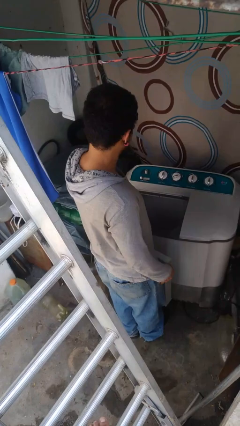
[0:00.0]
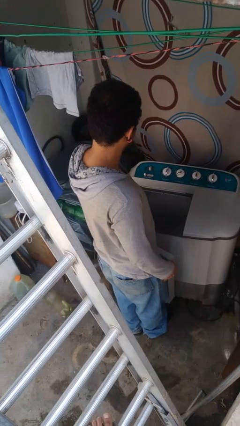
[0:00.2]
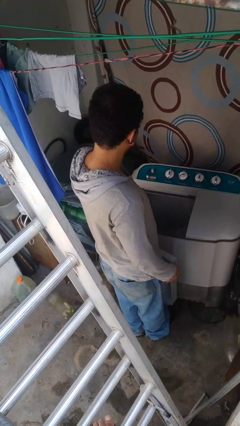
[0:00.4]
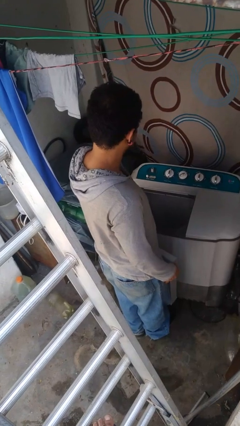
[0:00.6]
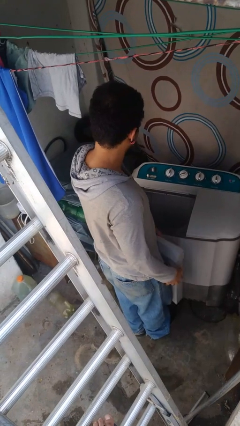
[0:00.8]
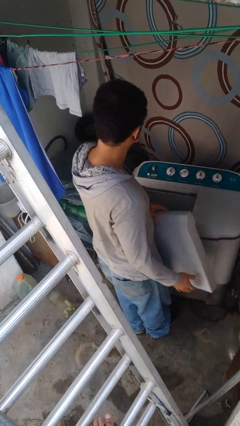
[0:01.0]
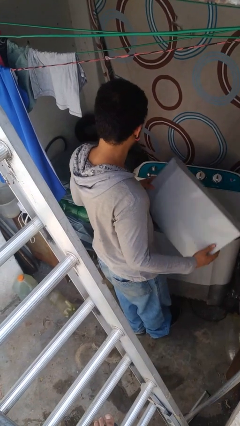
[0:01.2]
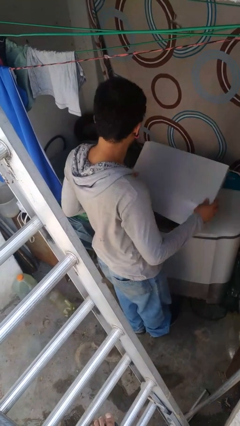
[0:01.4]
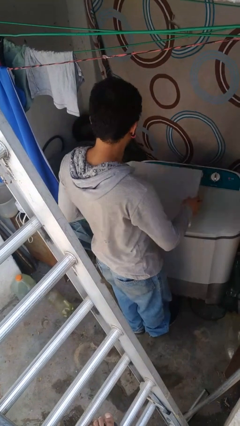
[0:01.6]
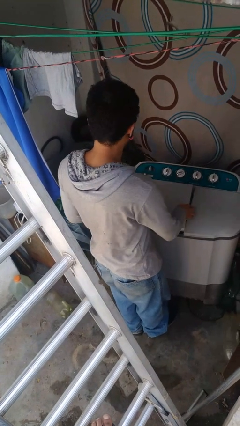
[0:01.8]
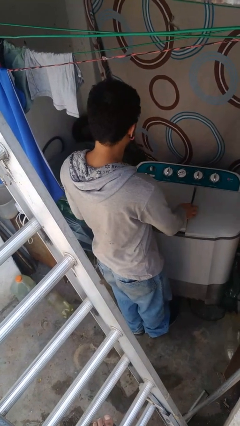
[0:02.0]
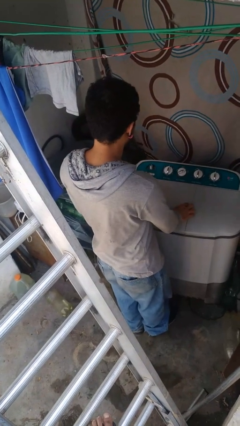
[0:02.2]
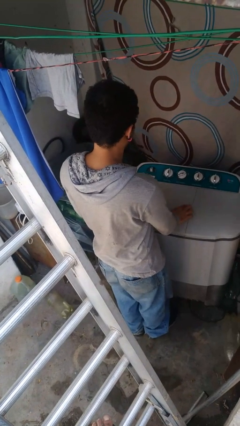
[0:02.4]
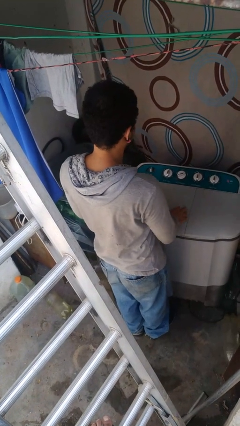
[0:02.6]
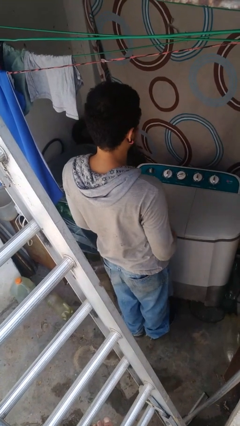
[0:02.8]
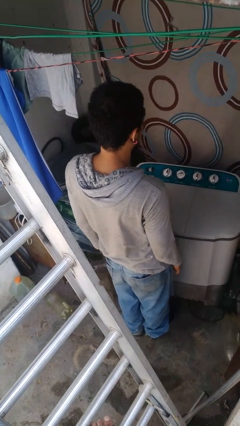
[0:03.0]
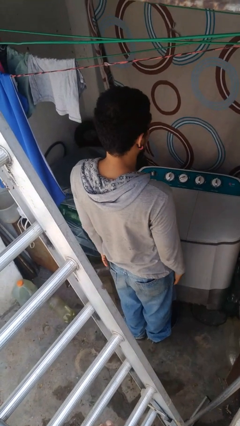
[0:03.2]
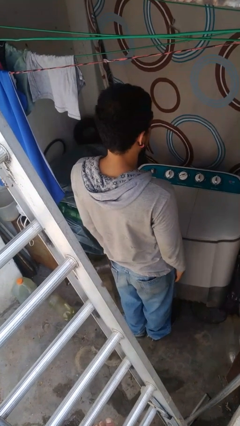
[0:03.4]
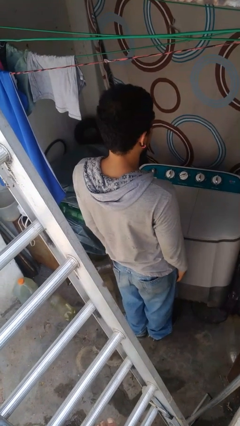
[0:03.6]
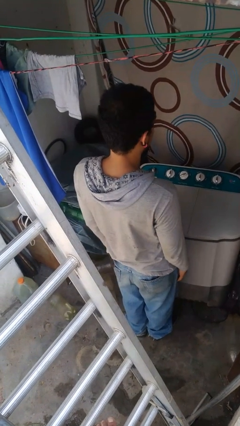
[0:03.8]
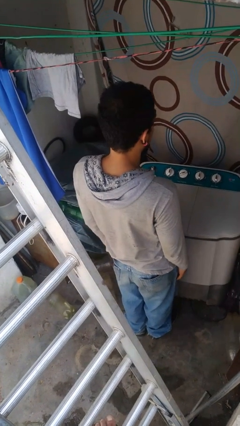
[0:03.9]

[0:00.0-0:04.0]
person closes clothes washer

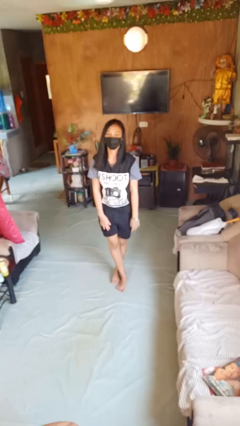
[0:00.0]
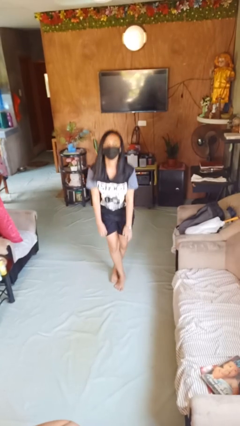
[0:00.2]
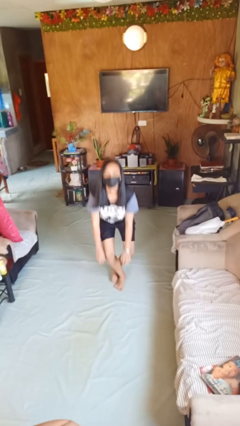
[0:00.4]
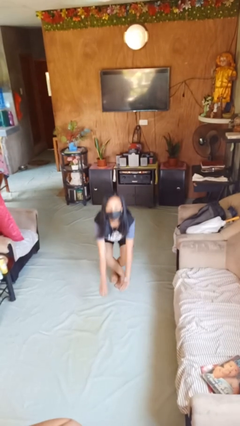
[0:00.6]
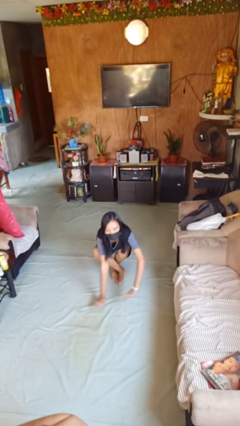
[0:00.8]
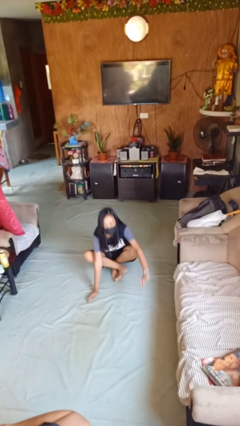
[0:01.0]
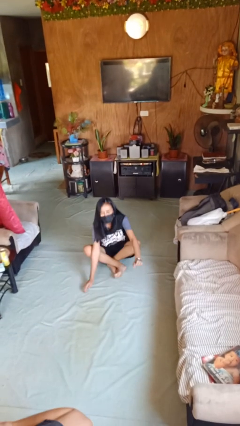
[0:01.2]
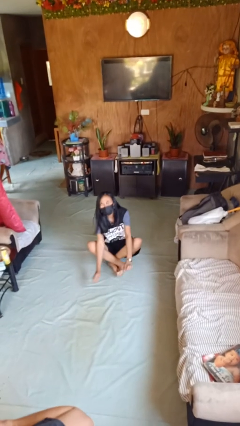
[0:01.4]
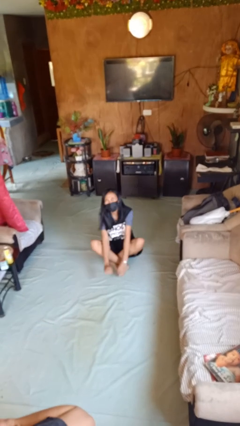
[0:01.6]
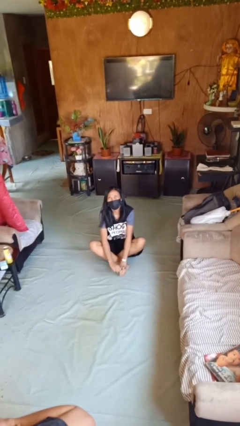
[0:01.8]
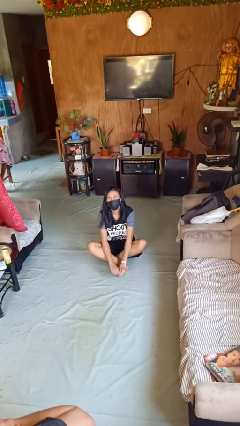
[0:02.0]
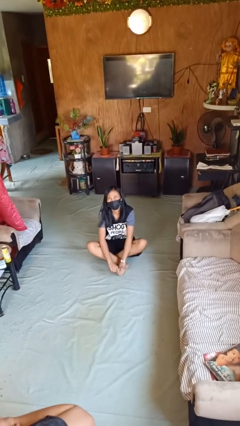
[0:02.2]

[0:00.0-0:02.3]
person sits crisscross

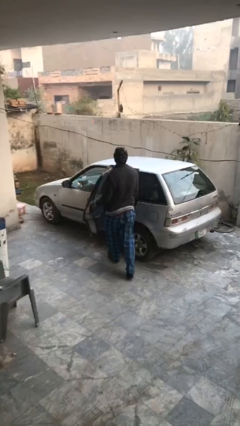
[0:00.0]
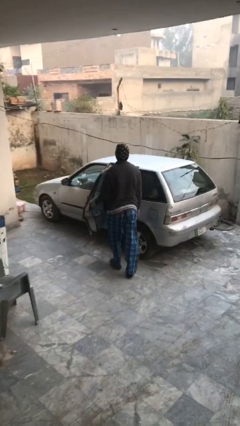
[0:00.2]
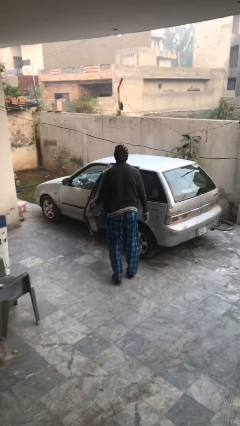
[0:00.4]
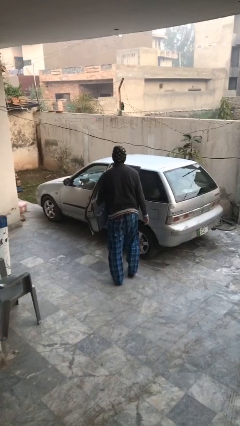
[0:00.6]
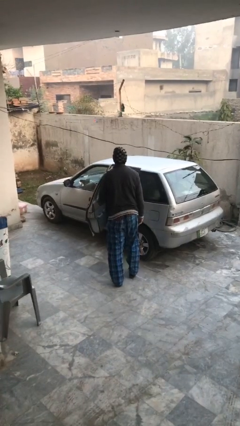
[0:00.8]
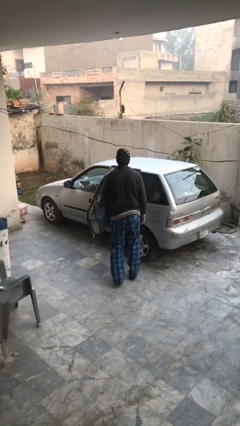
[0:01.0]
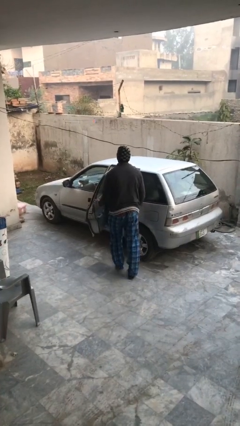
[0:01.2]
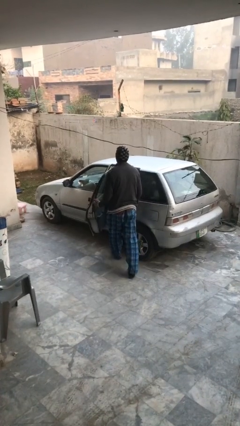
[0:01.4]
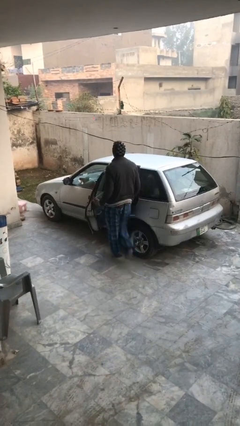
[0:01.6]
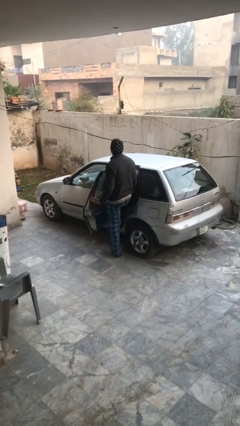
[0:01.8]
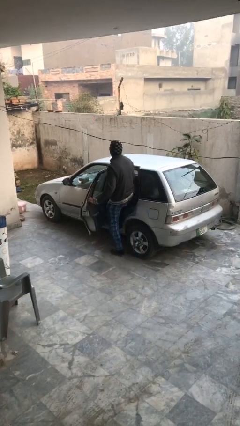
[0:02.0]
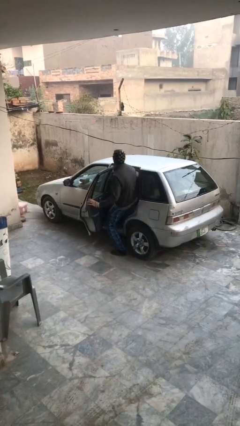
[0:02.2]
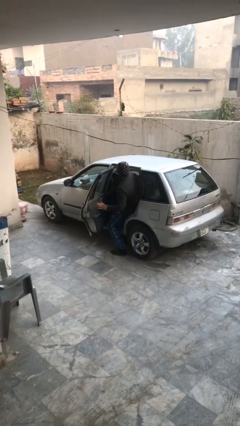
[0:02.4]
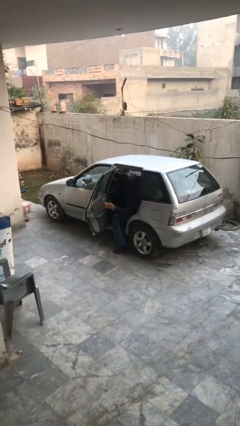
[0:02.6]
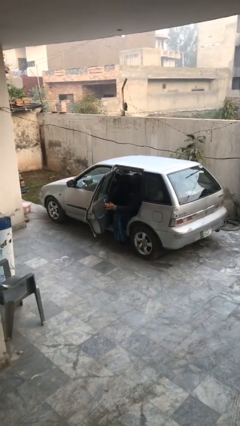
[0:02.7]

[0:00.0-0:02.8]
person enters car

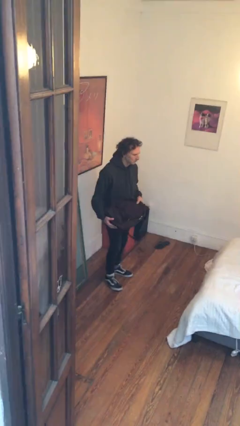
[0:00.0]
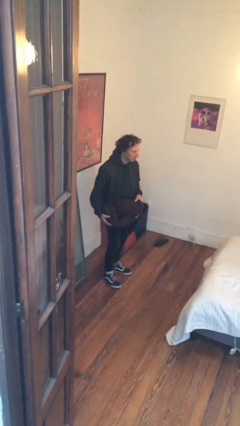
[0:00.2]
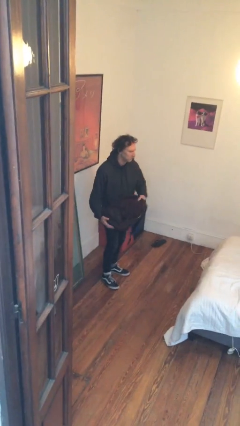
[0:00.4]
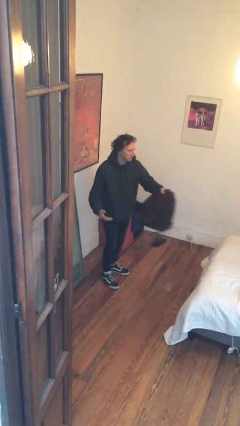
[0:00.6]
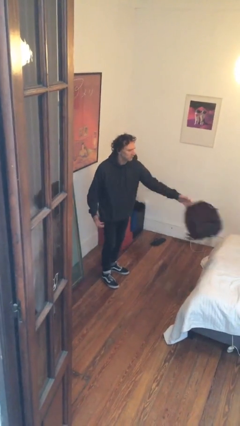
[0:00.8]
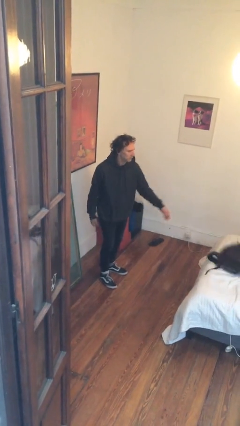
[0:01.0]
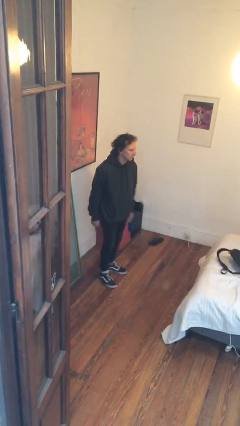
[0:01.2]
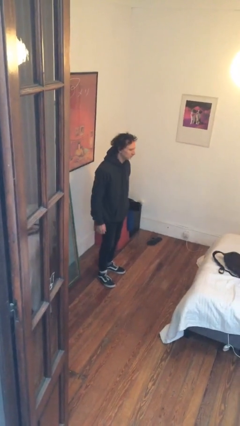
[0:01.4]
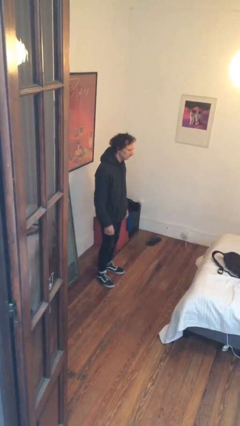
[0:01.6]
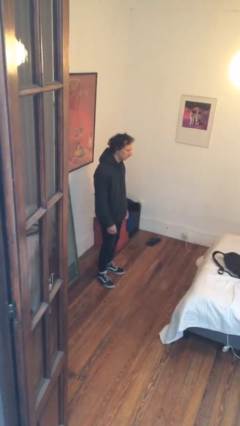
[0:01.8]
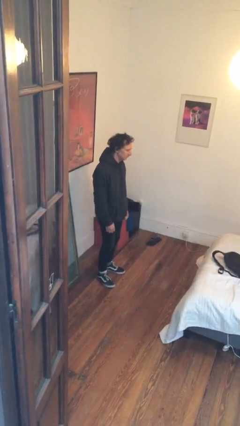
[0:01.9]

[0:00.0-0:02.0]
person throws object on bed

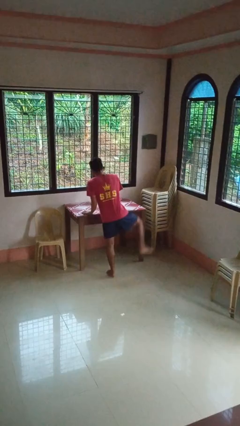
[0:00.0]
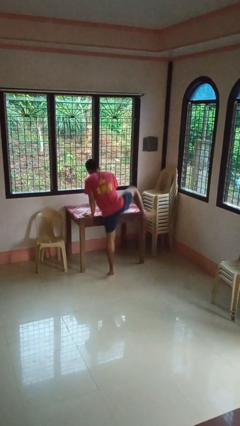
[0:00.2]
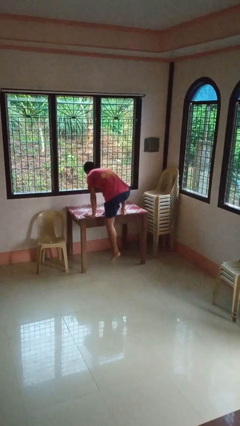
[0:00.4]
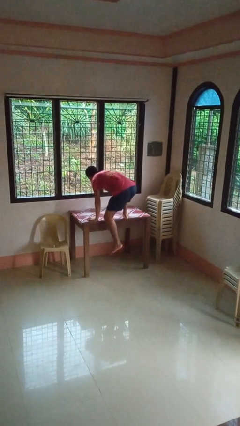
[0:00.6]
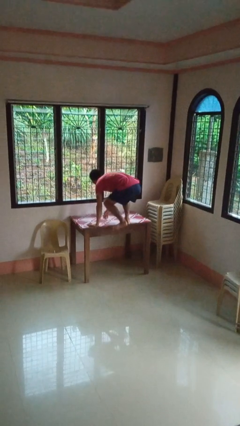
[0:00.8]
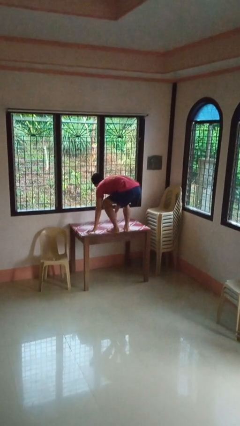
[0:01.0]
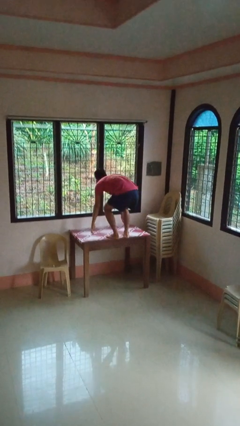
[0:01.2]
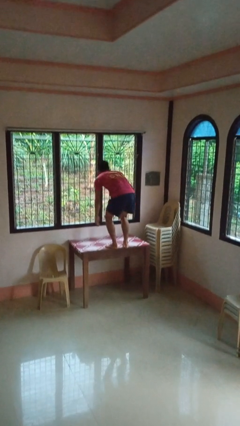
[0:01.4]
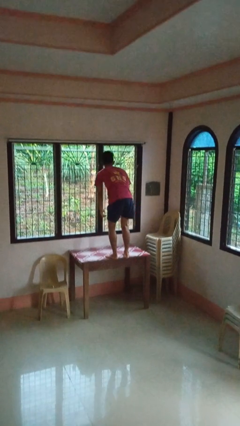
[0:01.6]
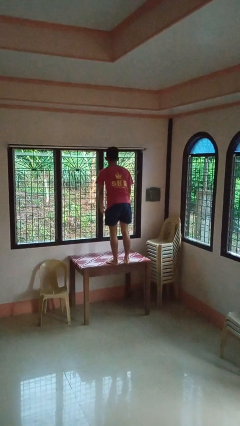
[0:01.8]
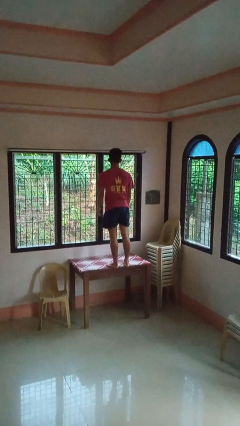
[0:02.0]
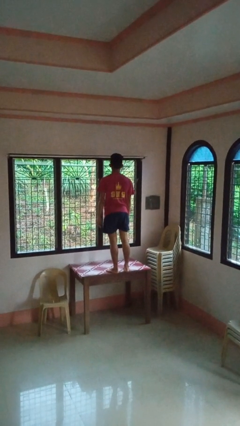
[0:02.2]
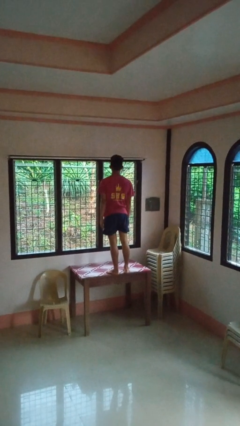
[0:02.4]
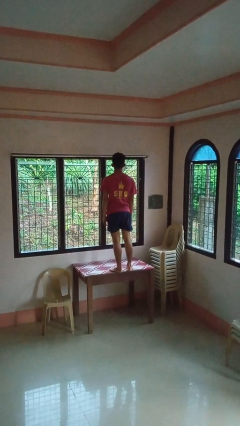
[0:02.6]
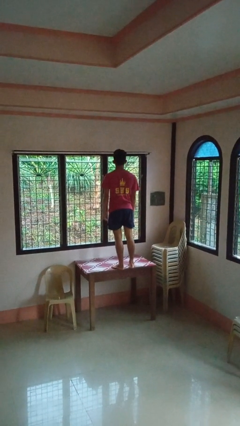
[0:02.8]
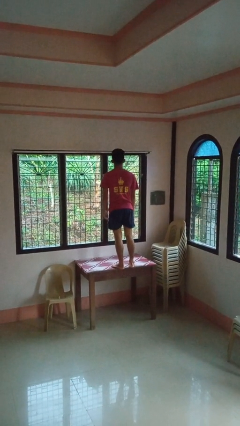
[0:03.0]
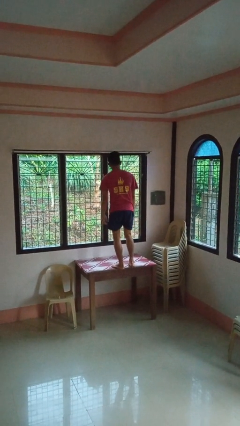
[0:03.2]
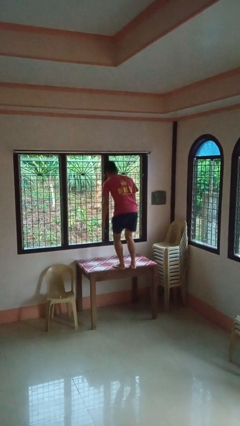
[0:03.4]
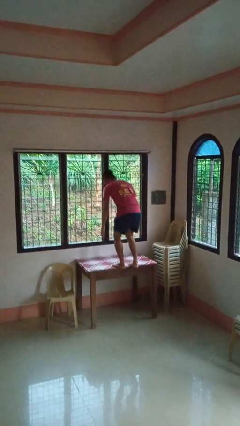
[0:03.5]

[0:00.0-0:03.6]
person climbs on table

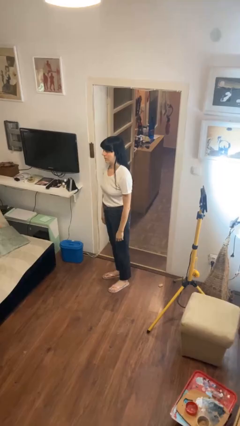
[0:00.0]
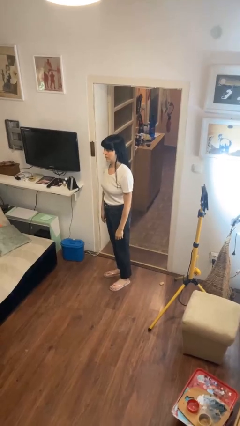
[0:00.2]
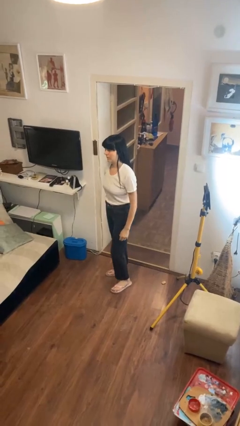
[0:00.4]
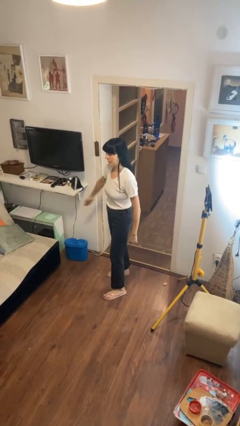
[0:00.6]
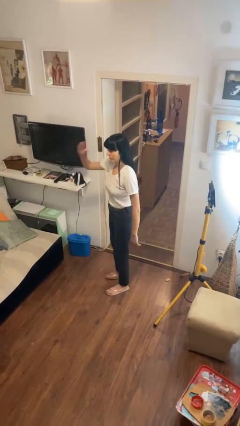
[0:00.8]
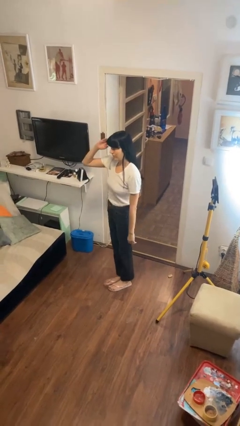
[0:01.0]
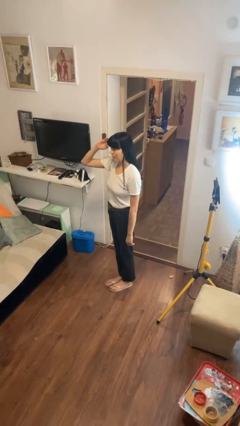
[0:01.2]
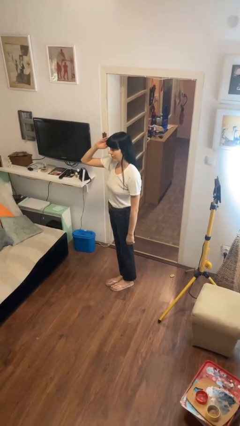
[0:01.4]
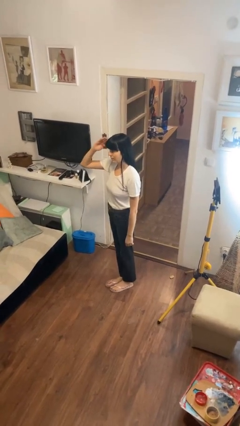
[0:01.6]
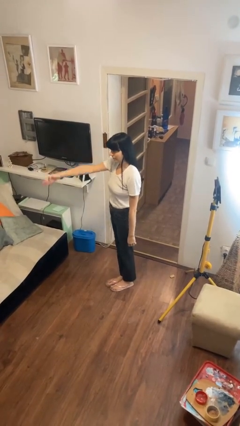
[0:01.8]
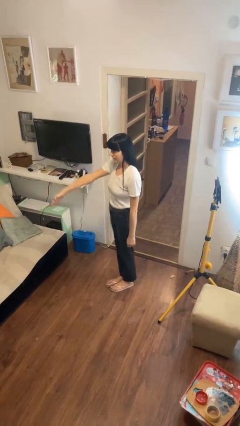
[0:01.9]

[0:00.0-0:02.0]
person salutes

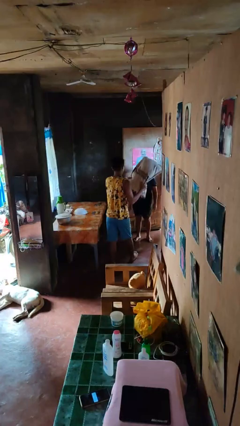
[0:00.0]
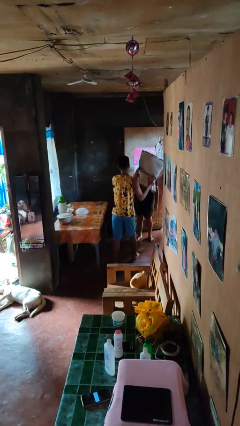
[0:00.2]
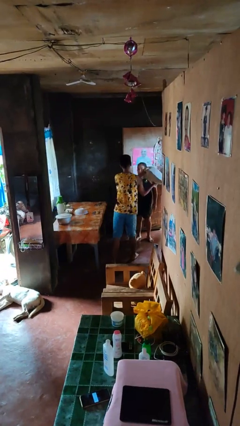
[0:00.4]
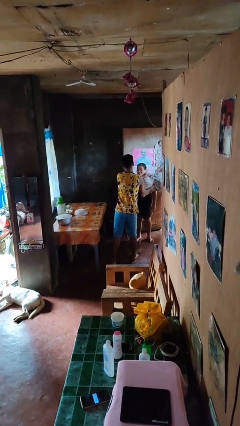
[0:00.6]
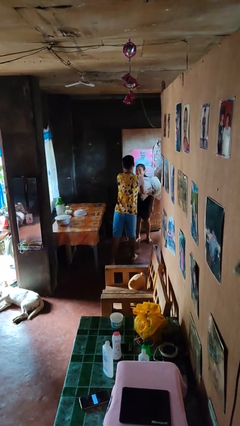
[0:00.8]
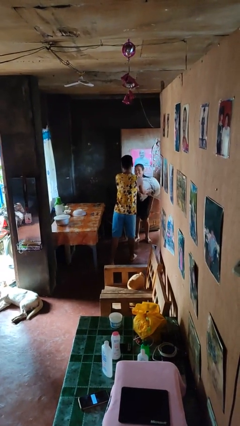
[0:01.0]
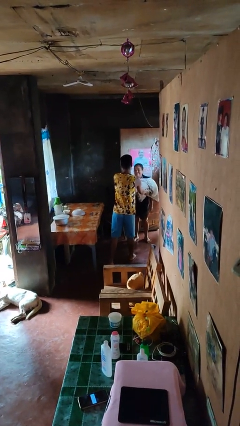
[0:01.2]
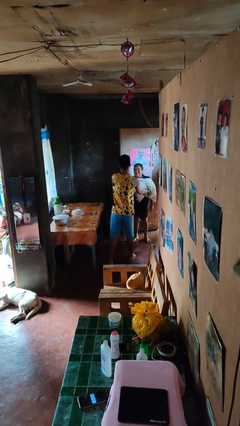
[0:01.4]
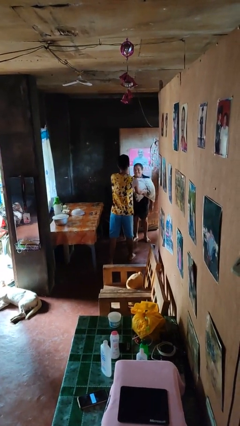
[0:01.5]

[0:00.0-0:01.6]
person hits person with pillow
